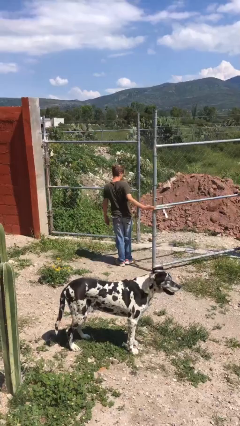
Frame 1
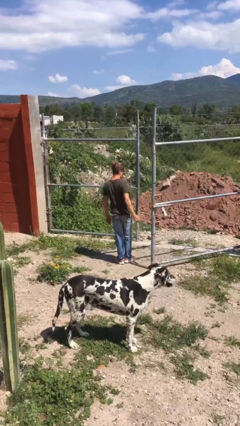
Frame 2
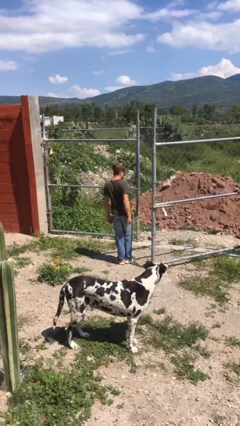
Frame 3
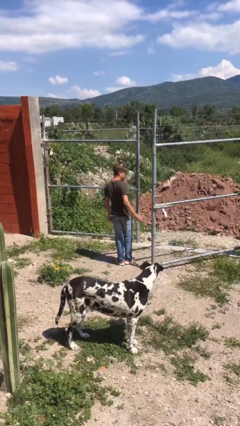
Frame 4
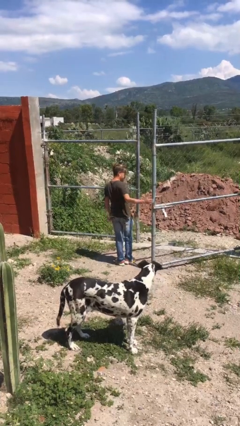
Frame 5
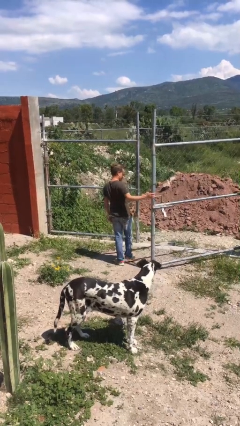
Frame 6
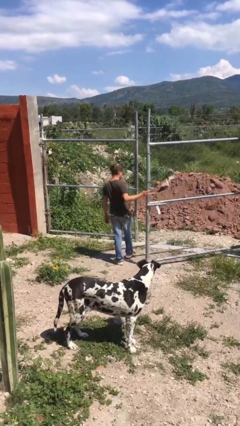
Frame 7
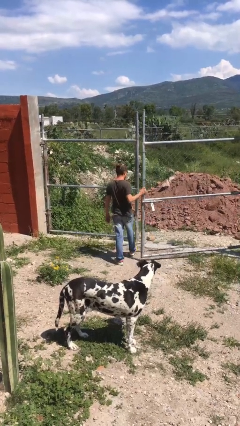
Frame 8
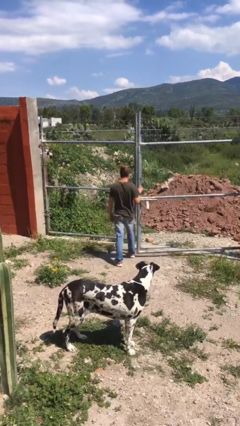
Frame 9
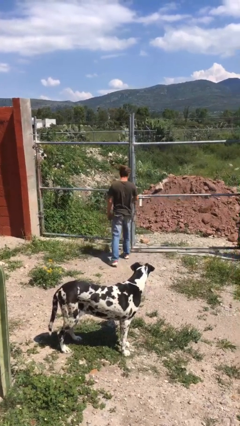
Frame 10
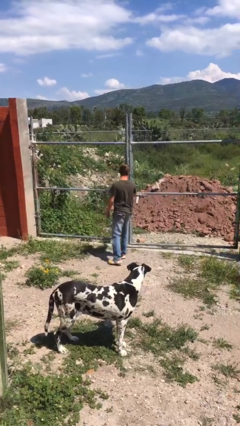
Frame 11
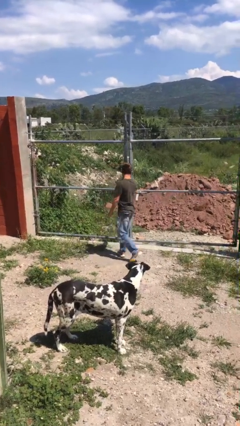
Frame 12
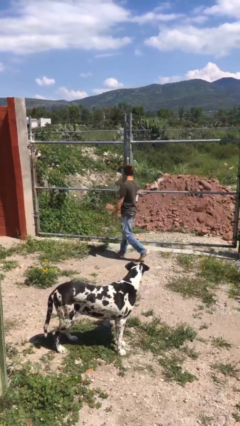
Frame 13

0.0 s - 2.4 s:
person closes gate

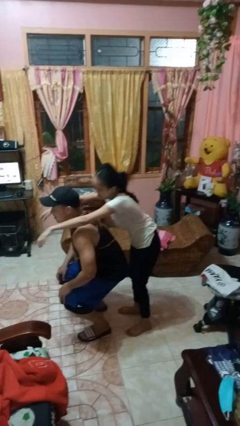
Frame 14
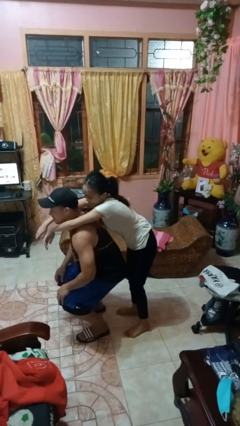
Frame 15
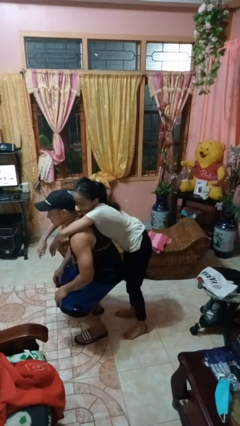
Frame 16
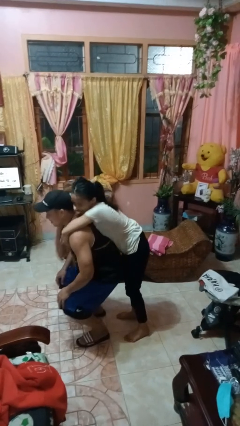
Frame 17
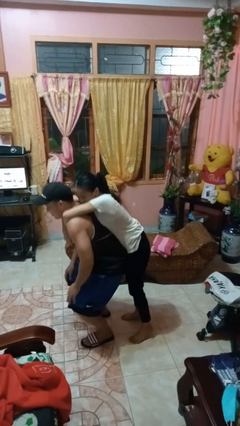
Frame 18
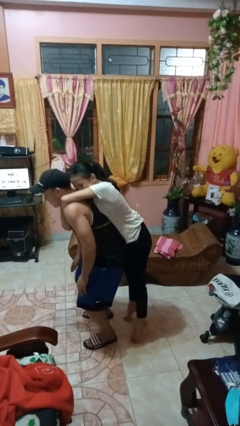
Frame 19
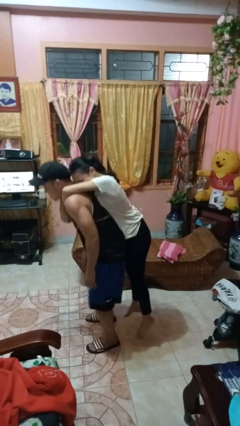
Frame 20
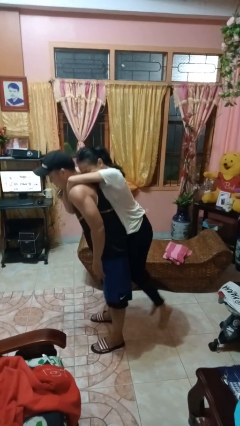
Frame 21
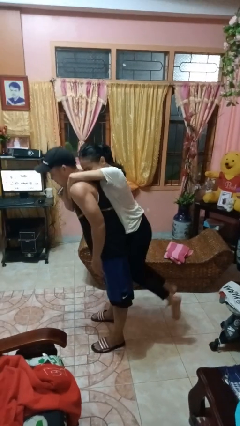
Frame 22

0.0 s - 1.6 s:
person picks up person

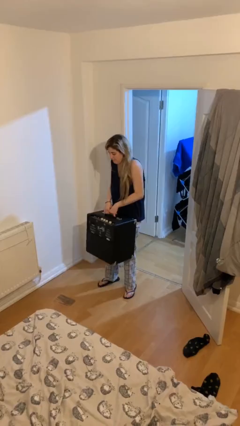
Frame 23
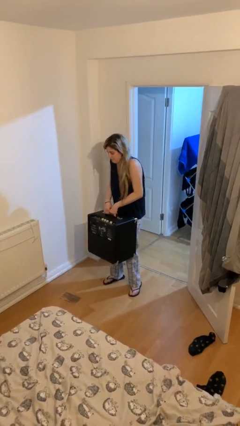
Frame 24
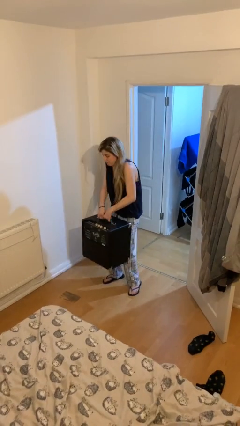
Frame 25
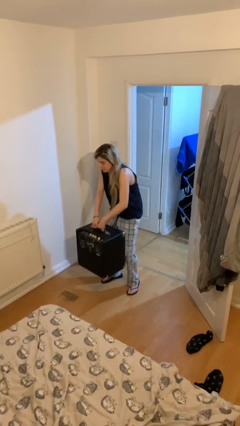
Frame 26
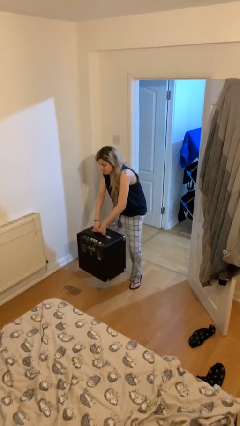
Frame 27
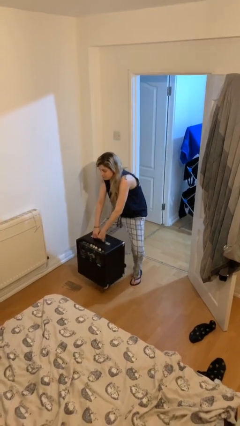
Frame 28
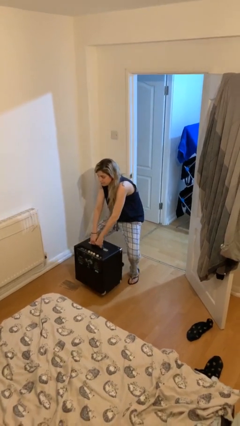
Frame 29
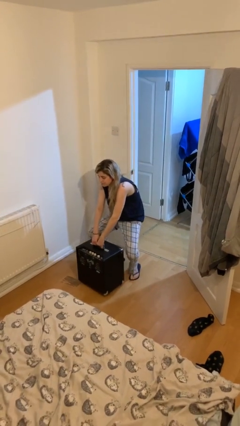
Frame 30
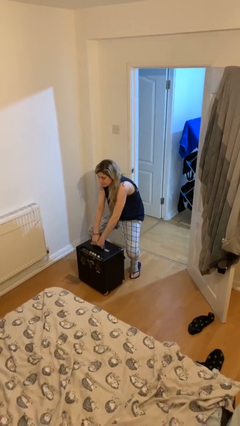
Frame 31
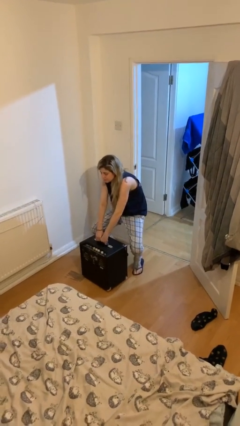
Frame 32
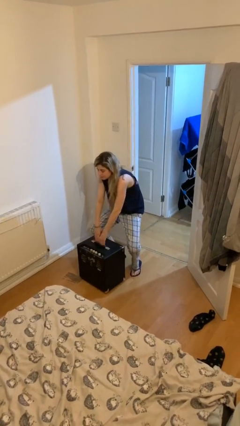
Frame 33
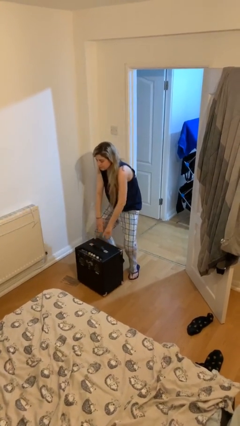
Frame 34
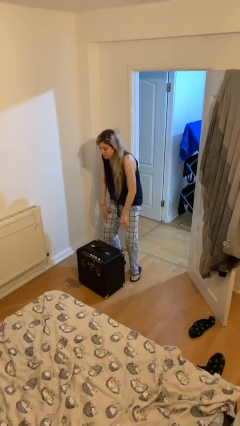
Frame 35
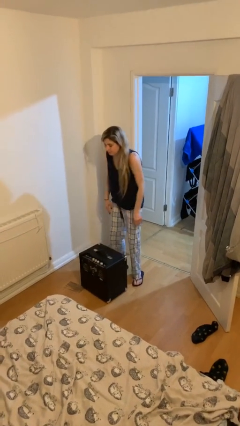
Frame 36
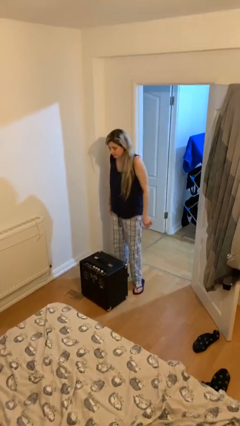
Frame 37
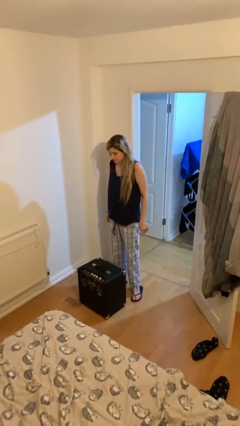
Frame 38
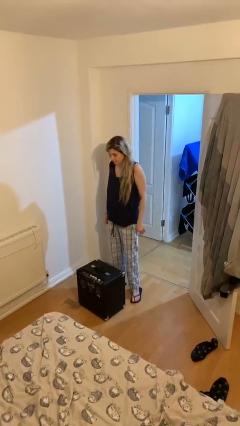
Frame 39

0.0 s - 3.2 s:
person puts down object on floor

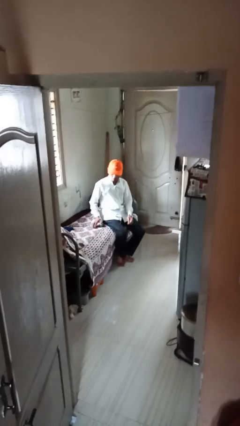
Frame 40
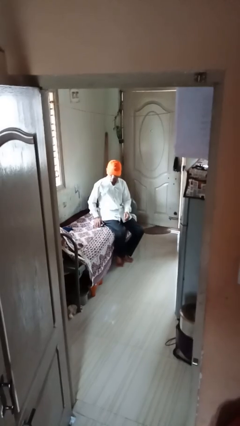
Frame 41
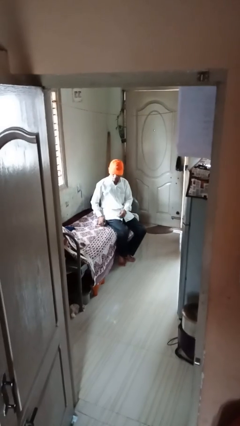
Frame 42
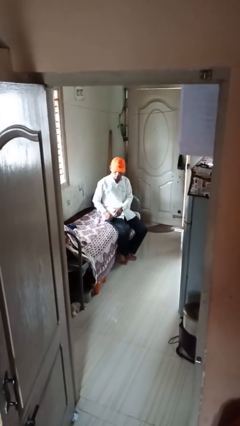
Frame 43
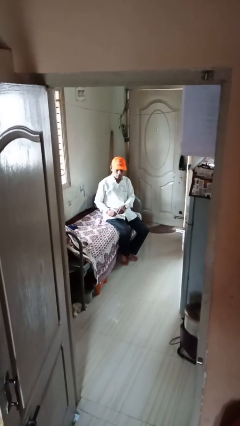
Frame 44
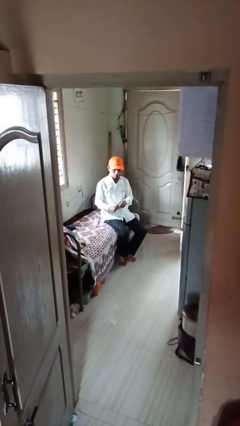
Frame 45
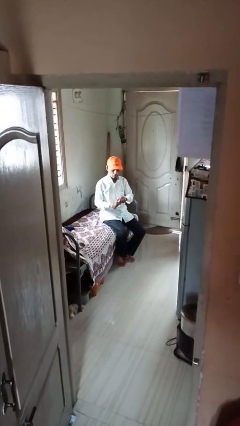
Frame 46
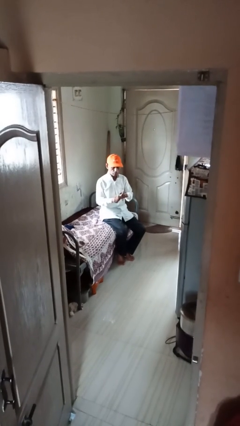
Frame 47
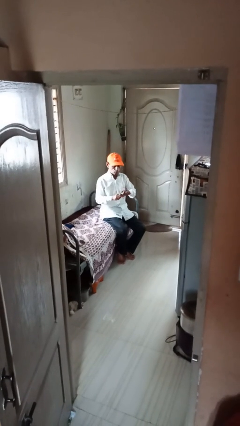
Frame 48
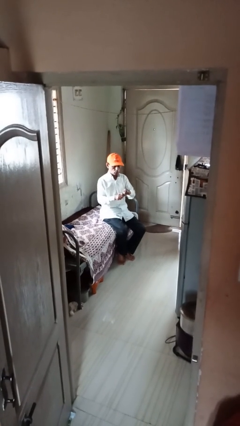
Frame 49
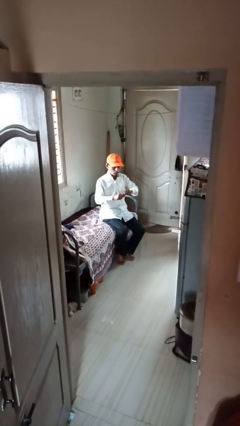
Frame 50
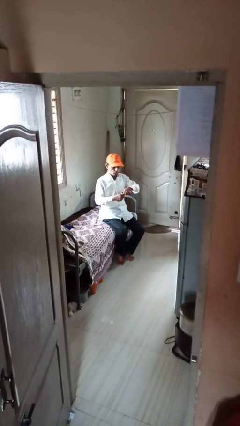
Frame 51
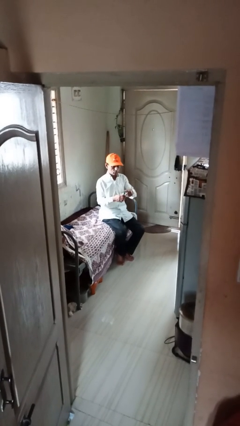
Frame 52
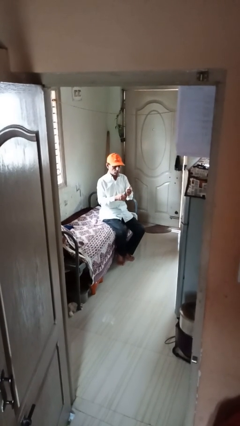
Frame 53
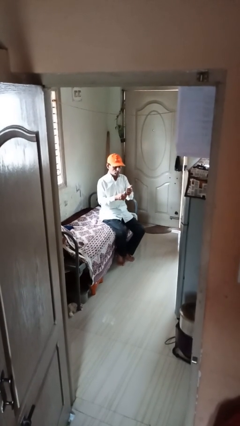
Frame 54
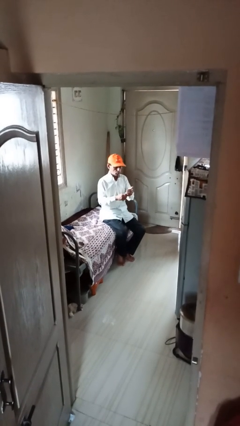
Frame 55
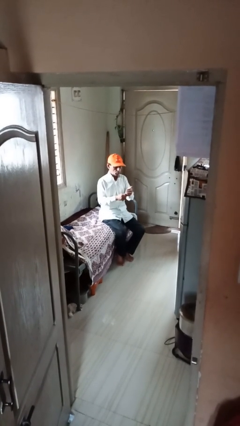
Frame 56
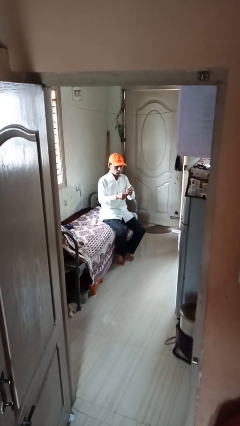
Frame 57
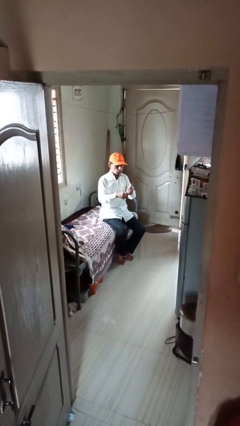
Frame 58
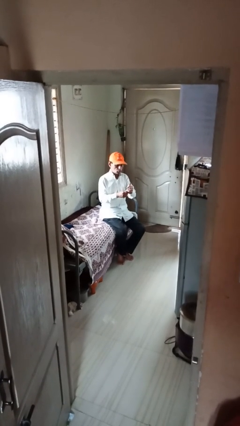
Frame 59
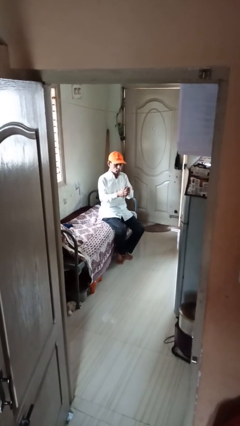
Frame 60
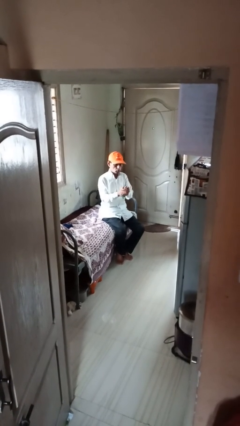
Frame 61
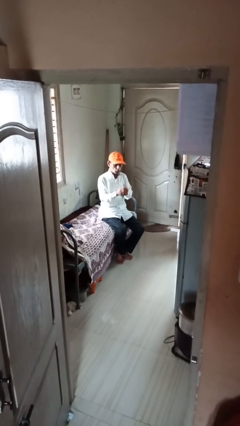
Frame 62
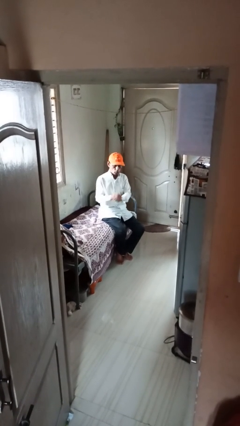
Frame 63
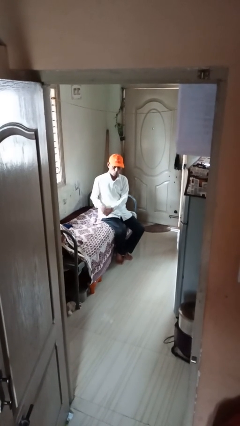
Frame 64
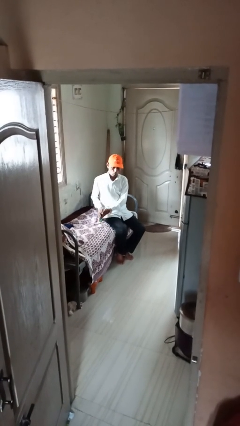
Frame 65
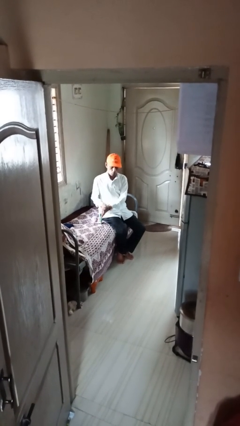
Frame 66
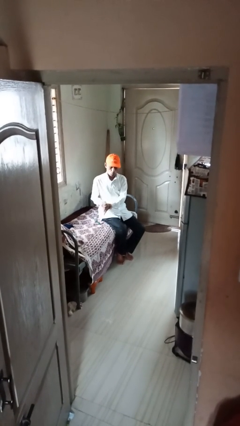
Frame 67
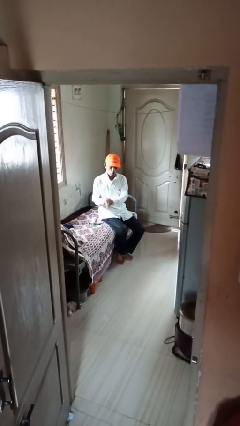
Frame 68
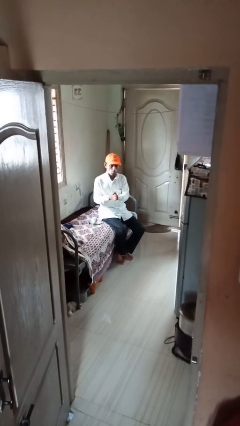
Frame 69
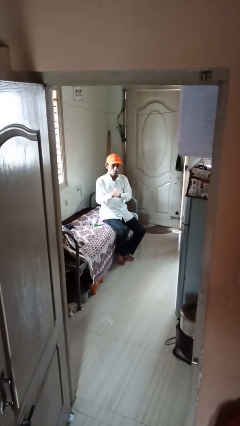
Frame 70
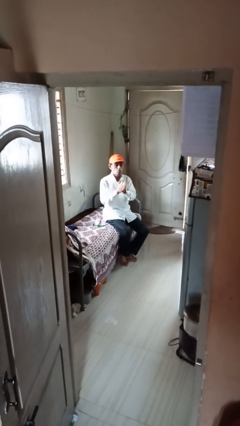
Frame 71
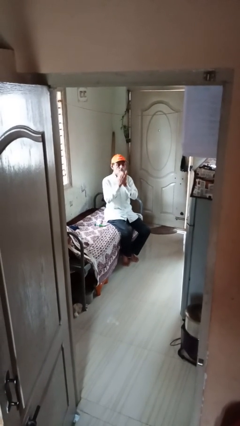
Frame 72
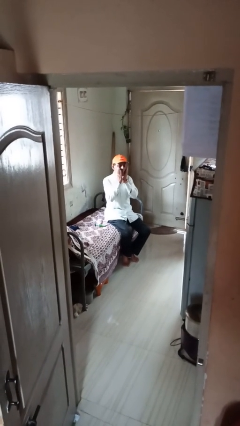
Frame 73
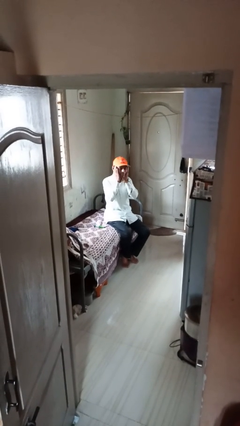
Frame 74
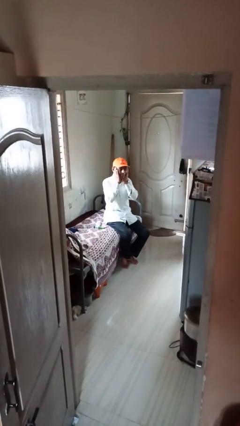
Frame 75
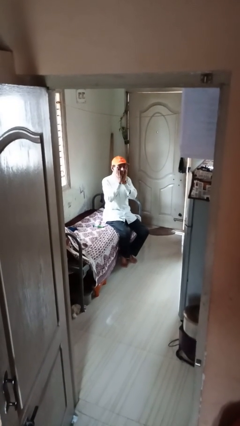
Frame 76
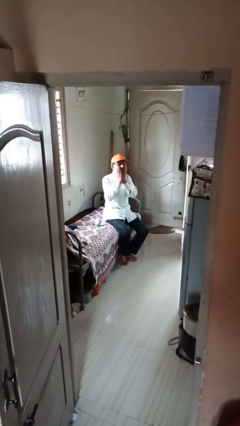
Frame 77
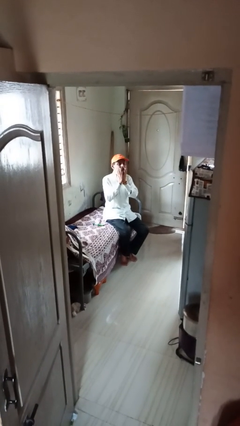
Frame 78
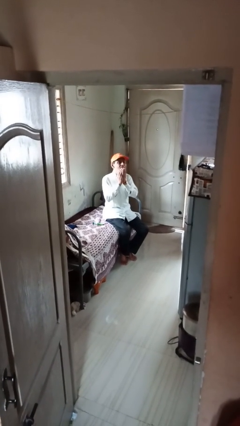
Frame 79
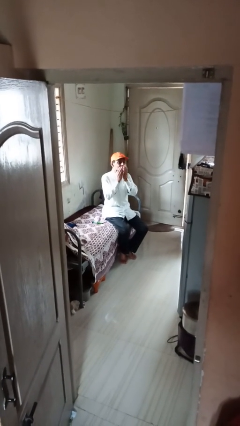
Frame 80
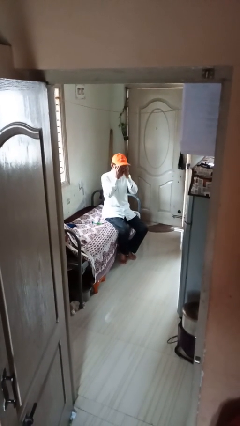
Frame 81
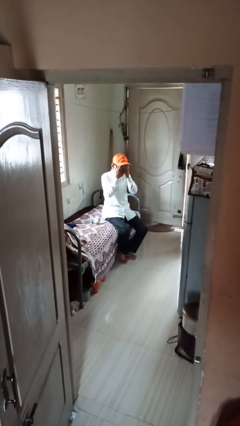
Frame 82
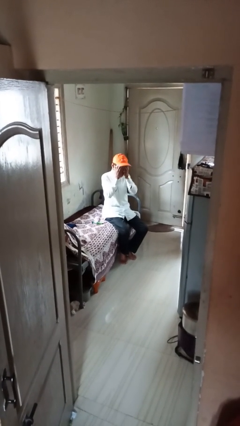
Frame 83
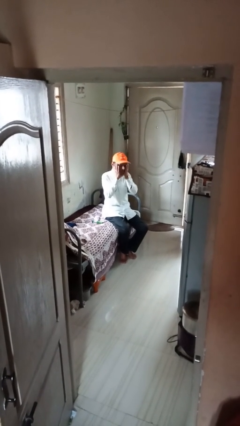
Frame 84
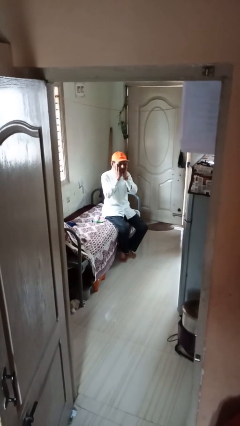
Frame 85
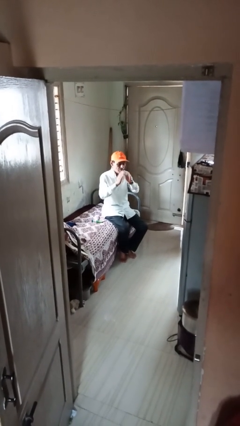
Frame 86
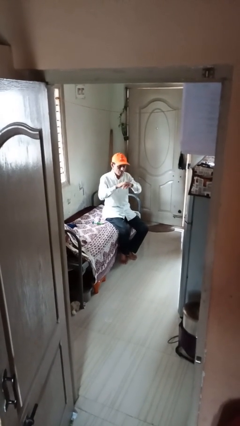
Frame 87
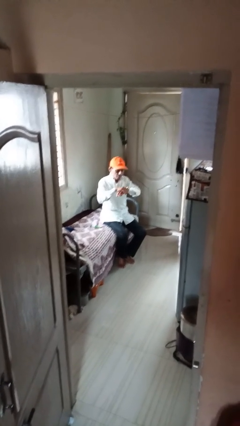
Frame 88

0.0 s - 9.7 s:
person applies sunscreen

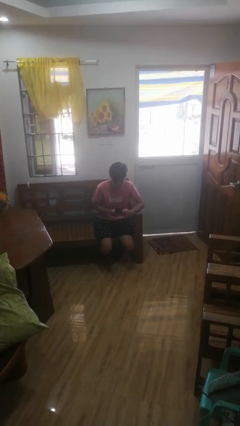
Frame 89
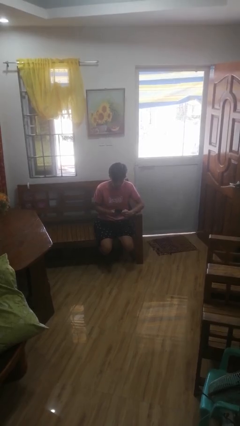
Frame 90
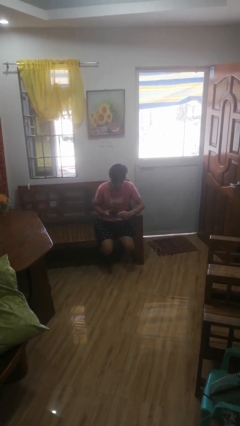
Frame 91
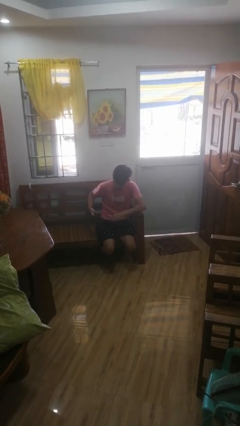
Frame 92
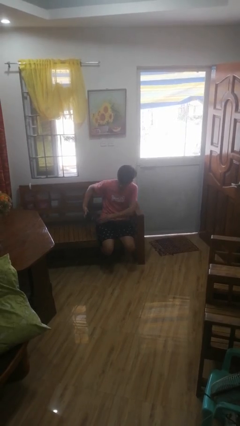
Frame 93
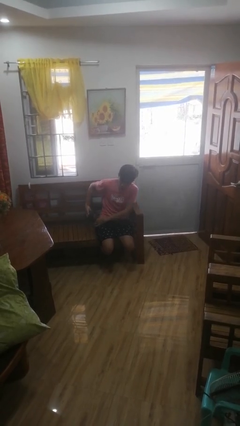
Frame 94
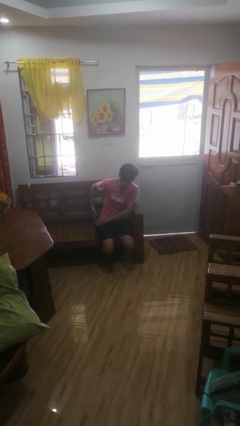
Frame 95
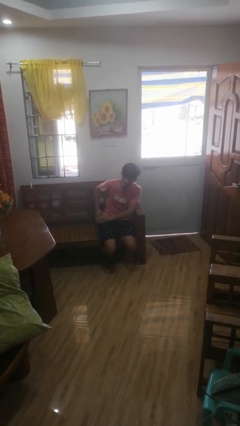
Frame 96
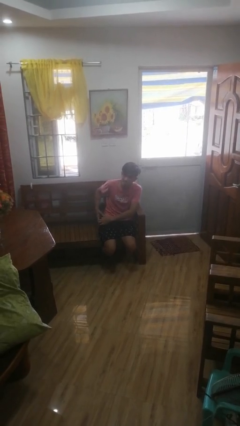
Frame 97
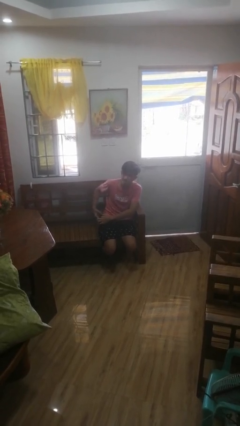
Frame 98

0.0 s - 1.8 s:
person puts phone into pocket
